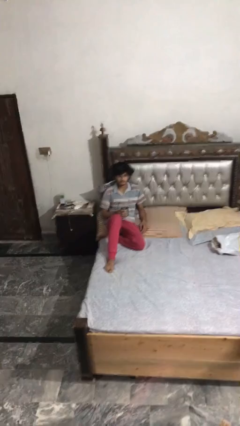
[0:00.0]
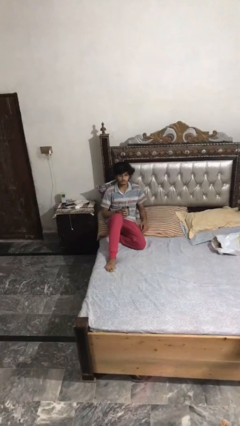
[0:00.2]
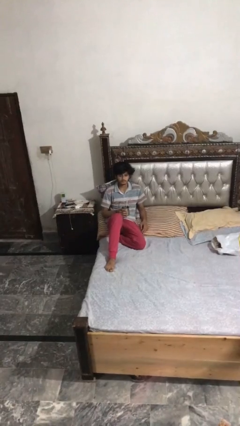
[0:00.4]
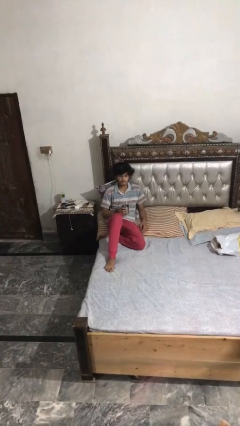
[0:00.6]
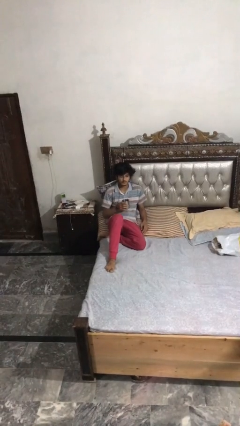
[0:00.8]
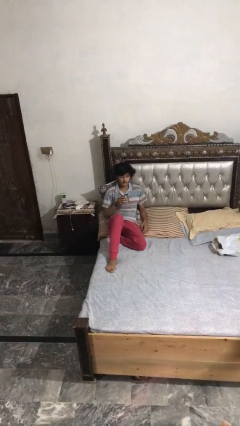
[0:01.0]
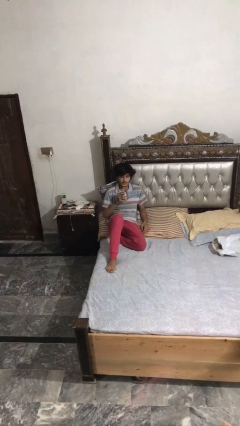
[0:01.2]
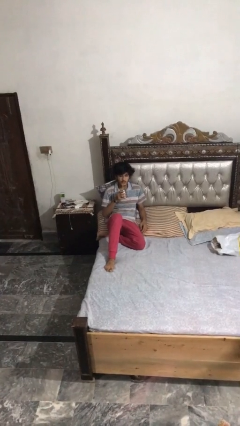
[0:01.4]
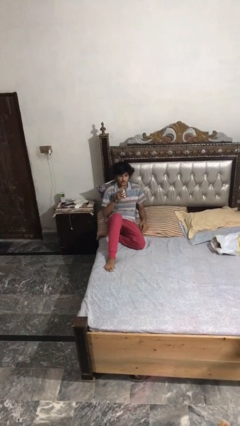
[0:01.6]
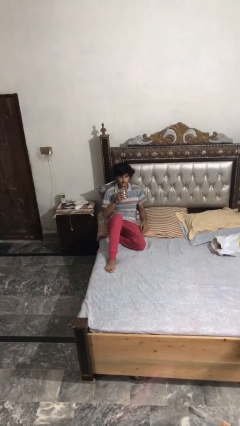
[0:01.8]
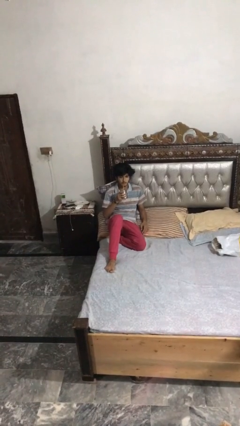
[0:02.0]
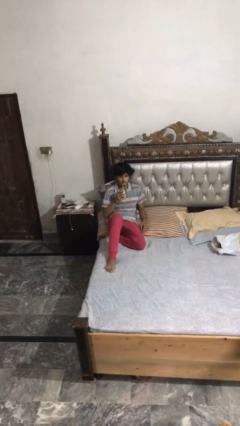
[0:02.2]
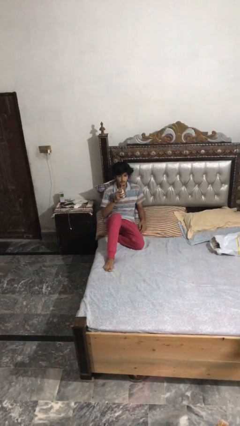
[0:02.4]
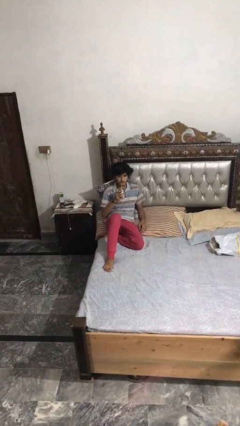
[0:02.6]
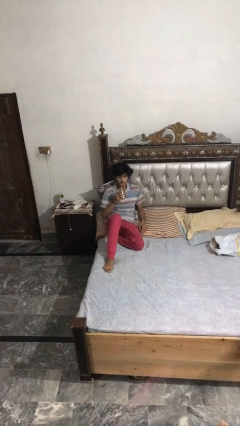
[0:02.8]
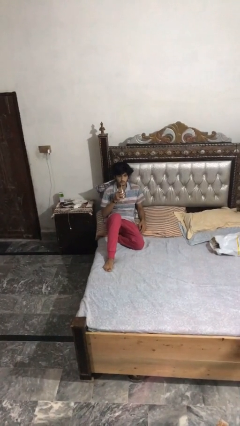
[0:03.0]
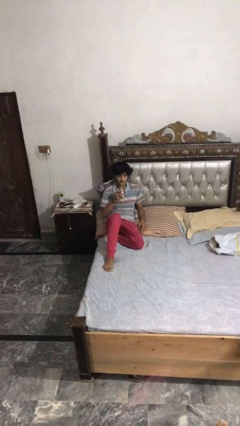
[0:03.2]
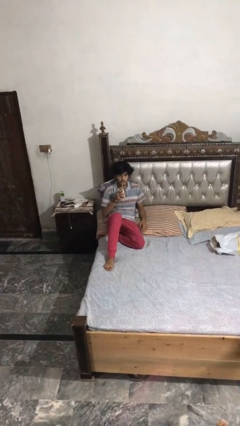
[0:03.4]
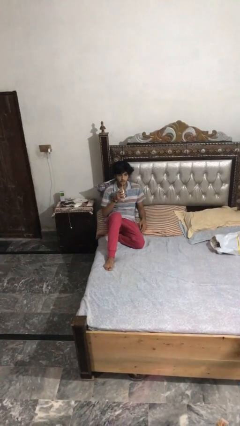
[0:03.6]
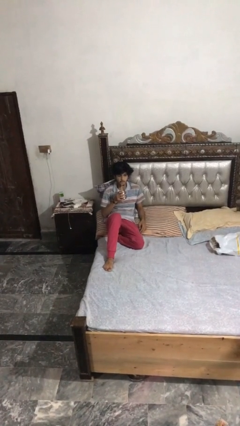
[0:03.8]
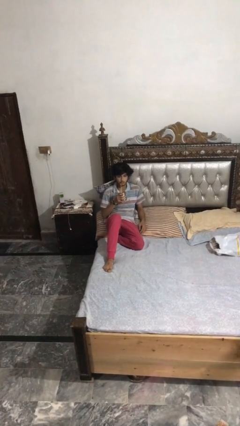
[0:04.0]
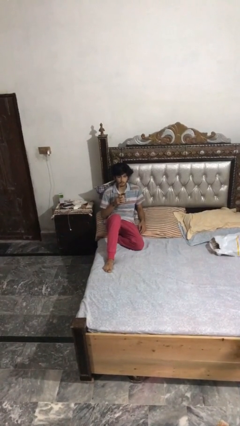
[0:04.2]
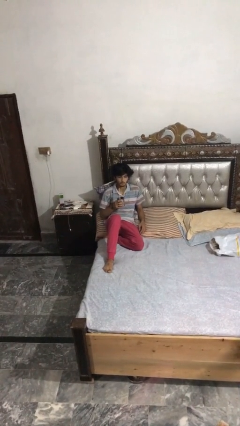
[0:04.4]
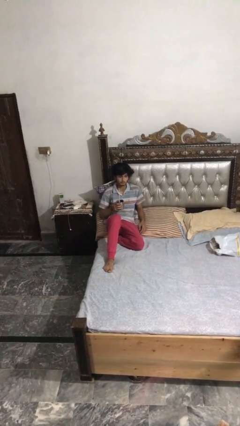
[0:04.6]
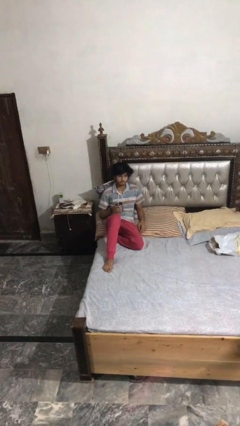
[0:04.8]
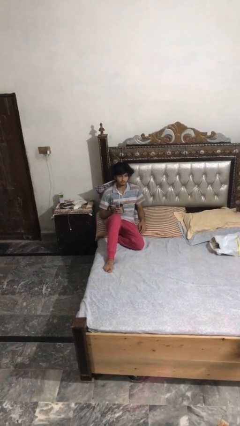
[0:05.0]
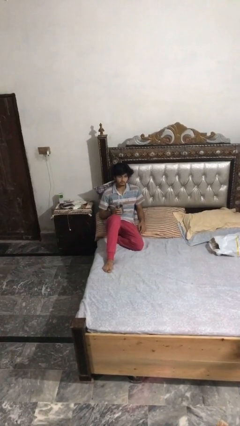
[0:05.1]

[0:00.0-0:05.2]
person drinks from straw

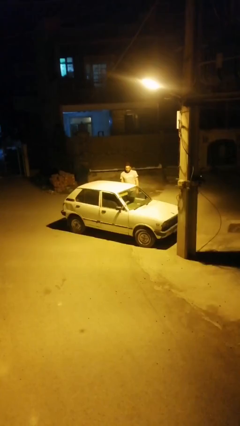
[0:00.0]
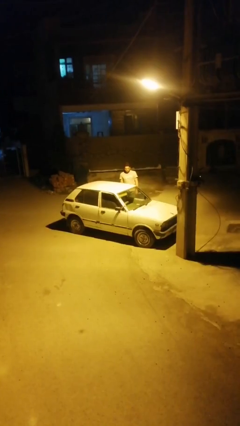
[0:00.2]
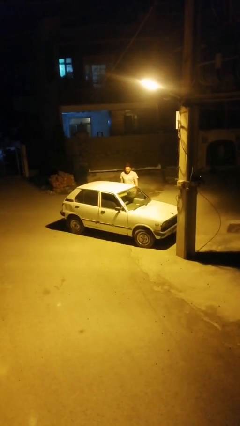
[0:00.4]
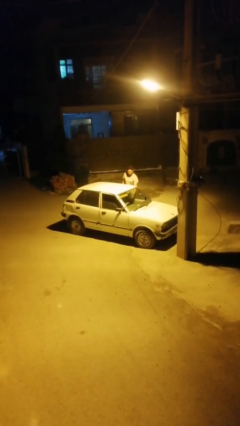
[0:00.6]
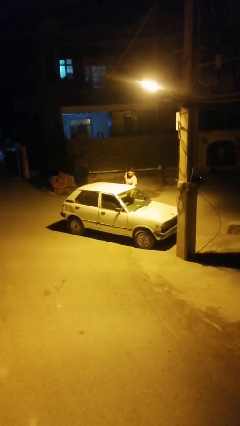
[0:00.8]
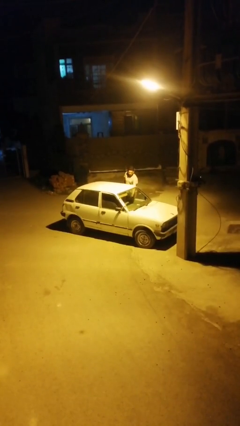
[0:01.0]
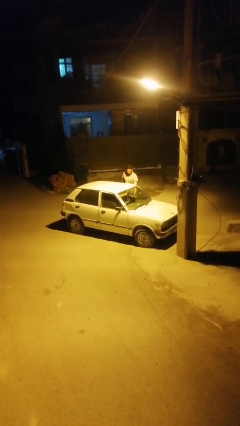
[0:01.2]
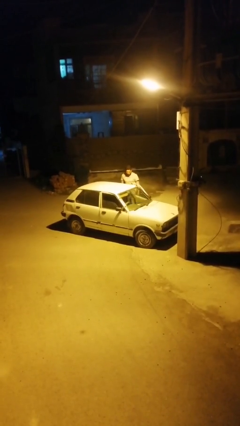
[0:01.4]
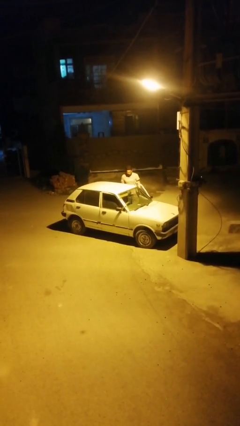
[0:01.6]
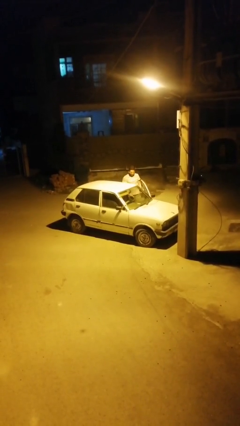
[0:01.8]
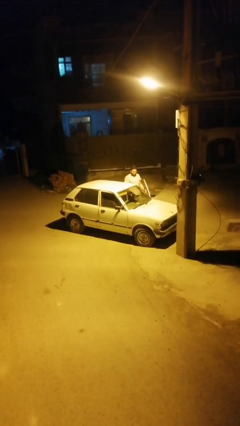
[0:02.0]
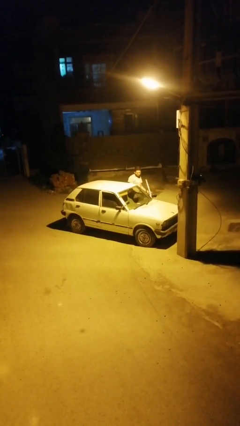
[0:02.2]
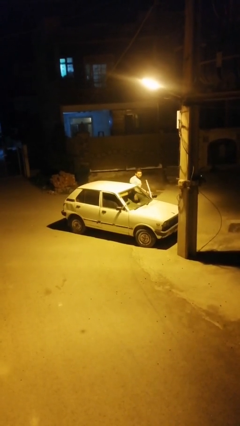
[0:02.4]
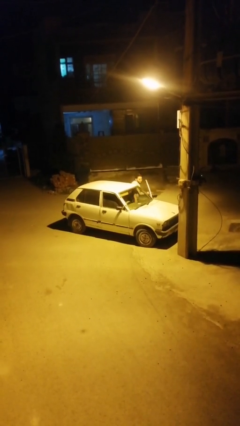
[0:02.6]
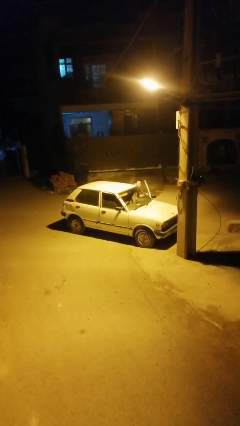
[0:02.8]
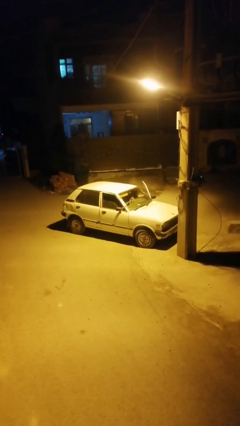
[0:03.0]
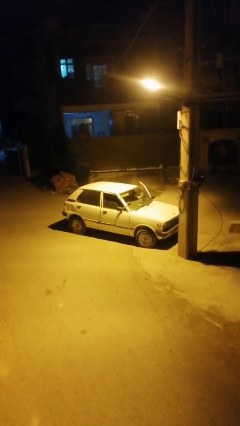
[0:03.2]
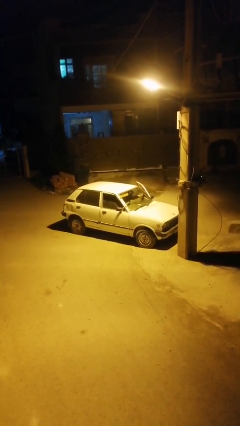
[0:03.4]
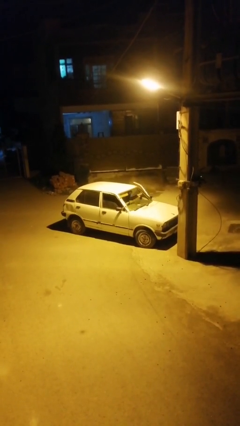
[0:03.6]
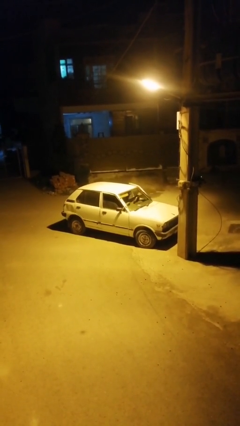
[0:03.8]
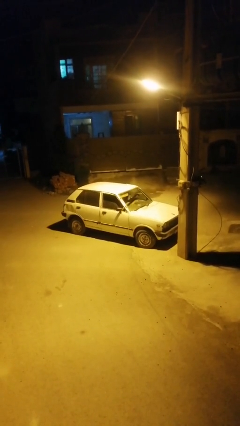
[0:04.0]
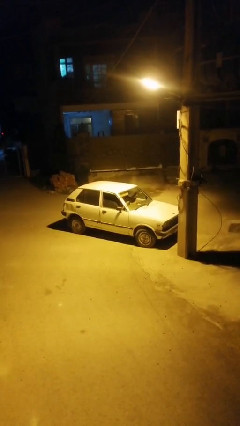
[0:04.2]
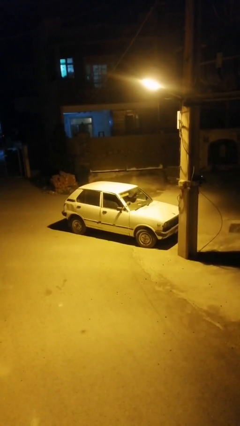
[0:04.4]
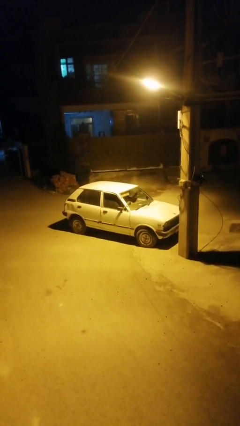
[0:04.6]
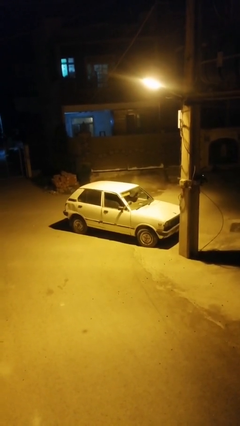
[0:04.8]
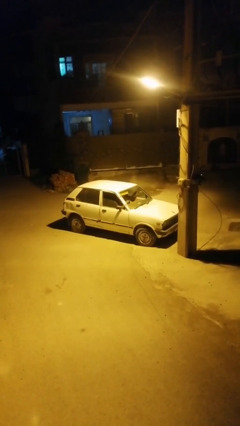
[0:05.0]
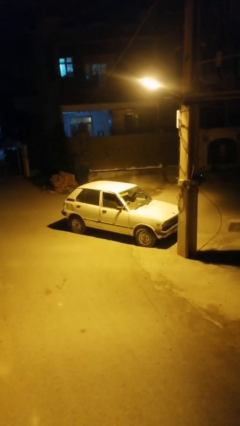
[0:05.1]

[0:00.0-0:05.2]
car picks up person

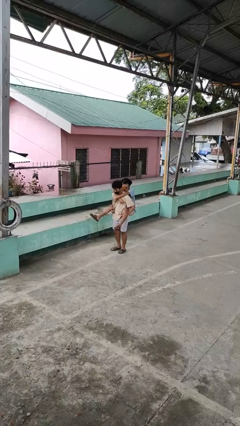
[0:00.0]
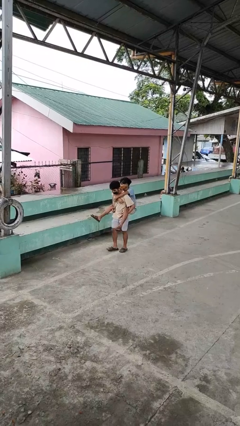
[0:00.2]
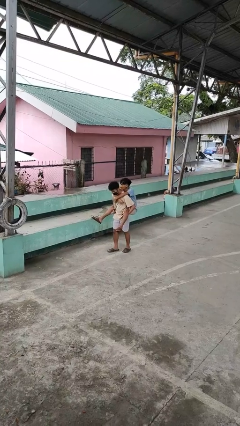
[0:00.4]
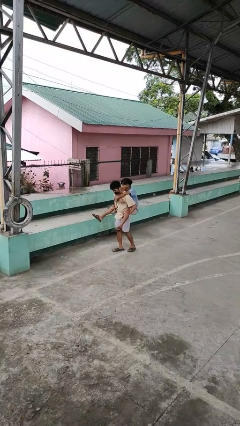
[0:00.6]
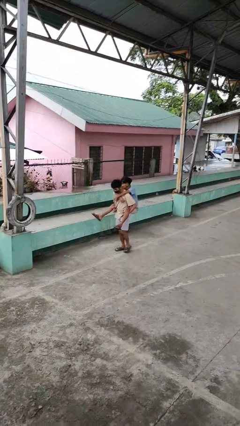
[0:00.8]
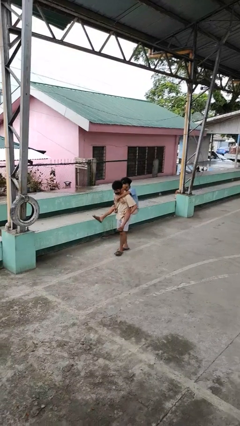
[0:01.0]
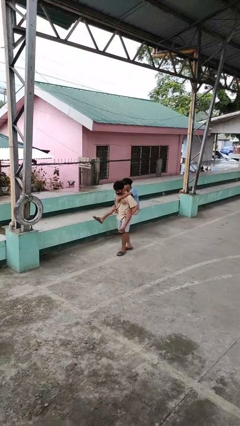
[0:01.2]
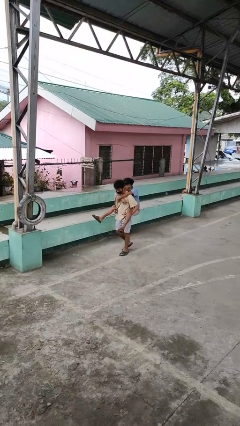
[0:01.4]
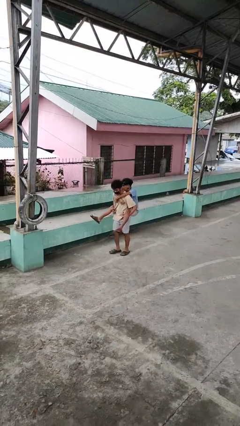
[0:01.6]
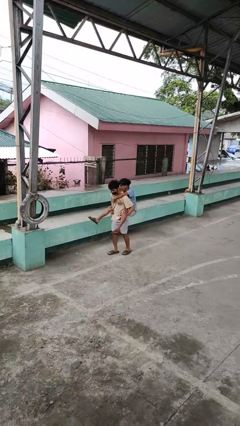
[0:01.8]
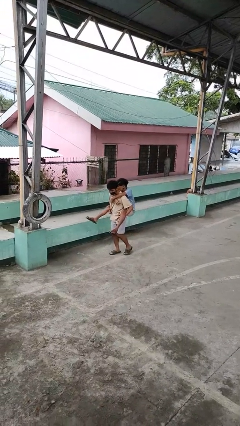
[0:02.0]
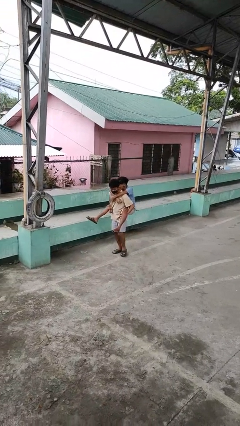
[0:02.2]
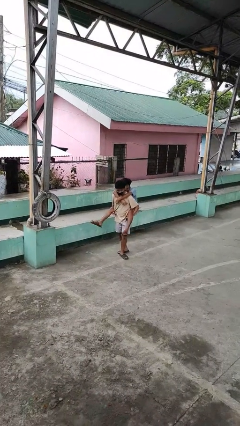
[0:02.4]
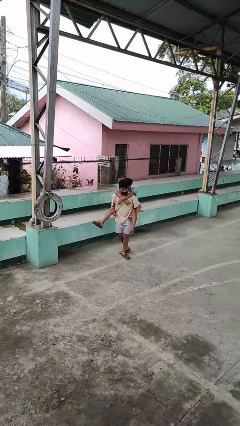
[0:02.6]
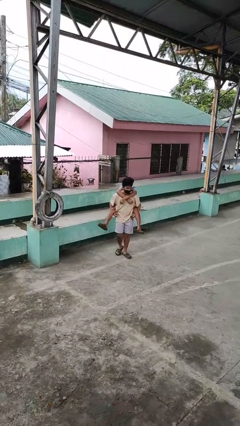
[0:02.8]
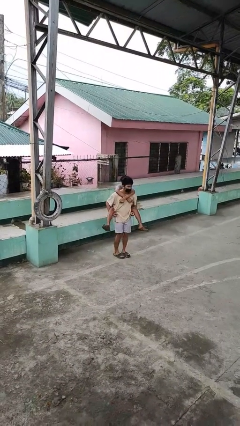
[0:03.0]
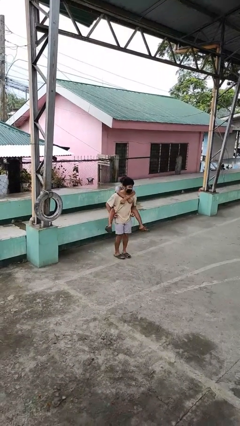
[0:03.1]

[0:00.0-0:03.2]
person carries person on back

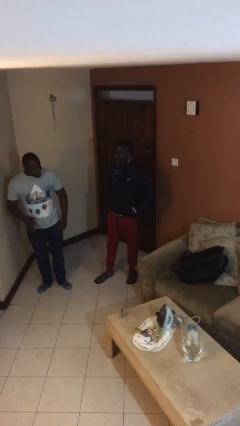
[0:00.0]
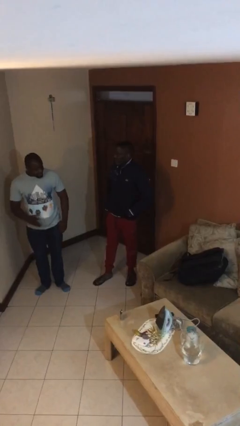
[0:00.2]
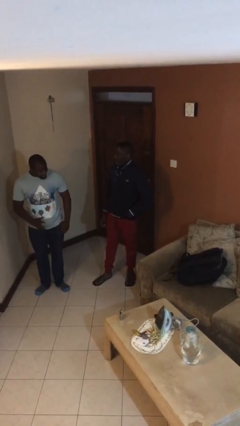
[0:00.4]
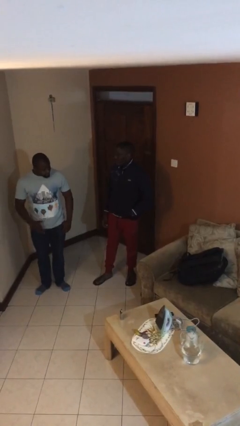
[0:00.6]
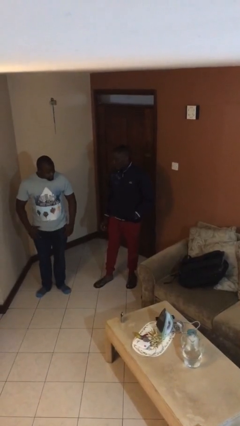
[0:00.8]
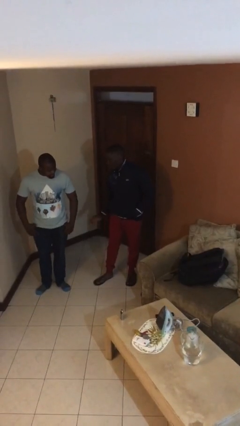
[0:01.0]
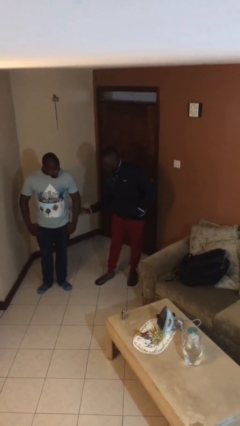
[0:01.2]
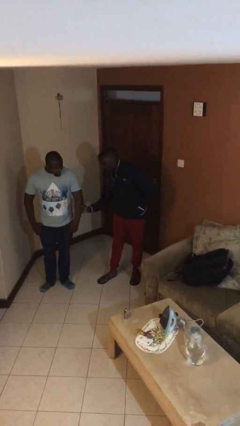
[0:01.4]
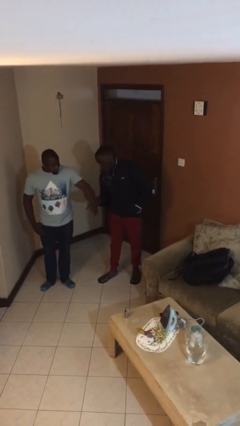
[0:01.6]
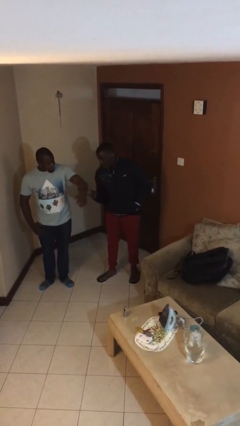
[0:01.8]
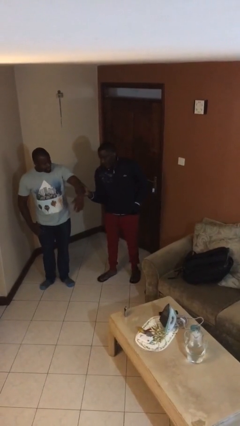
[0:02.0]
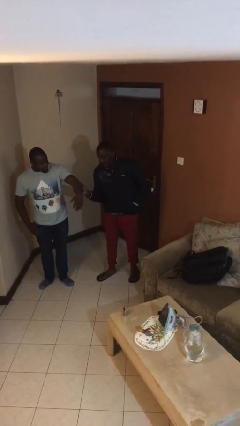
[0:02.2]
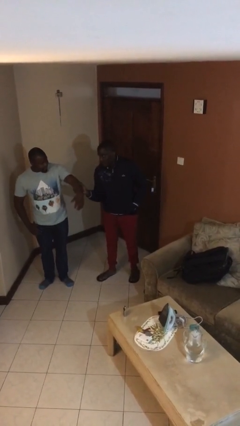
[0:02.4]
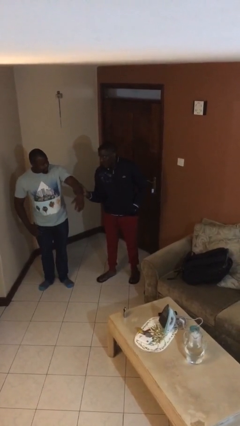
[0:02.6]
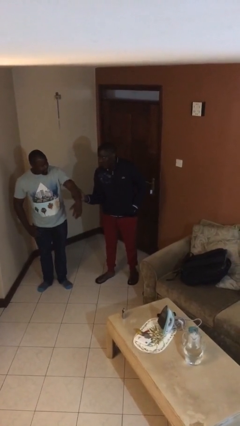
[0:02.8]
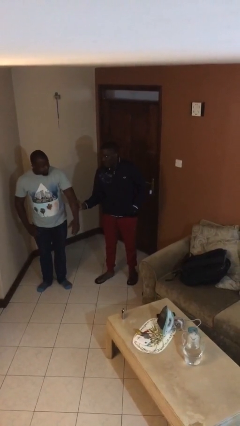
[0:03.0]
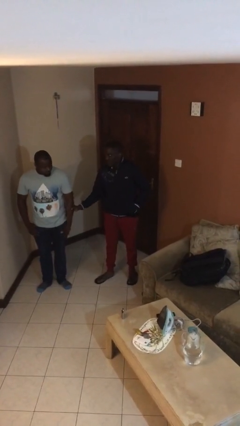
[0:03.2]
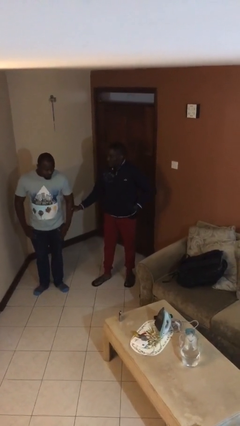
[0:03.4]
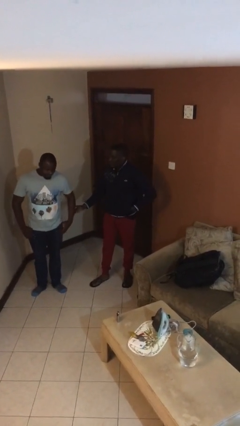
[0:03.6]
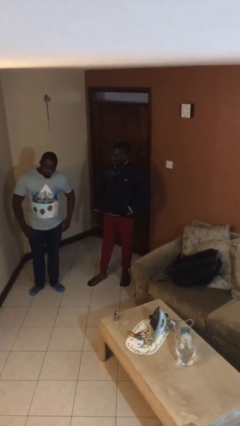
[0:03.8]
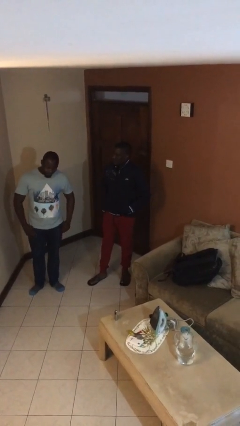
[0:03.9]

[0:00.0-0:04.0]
person grabs person by forearm
